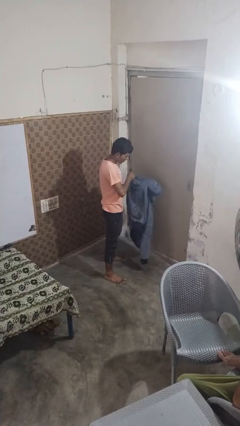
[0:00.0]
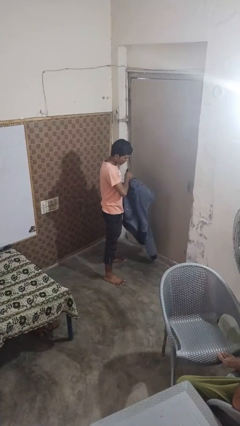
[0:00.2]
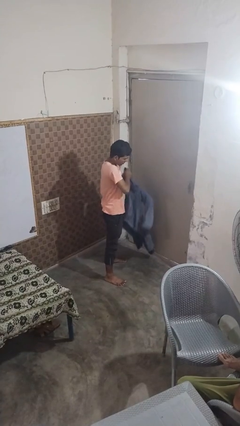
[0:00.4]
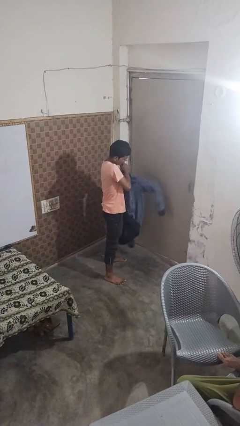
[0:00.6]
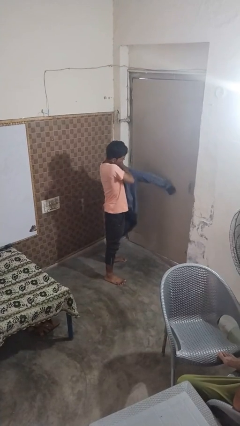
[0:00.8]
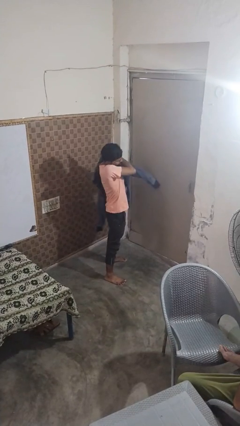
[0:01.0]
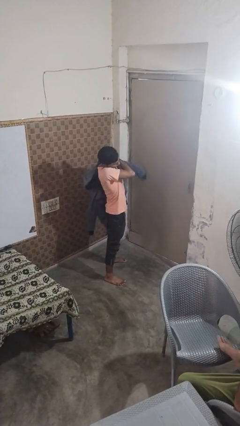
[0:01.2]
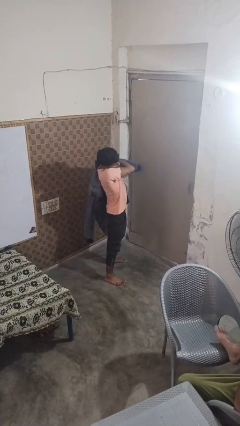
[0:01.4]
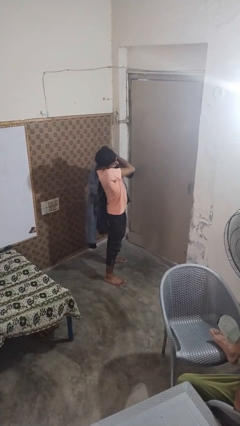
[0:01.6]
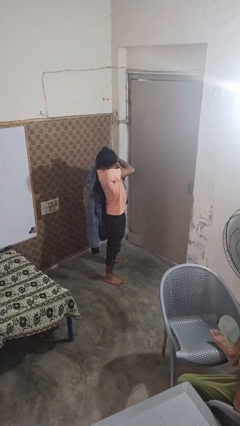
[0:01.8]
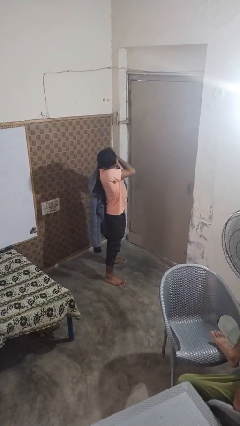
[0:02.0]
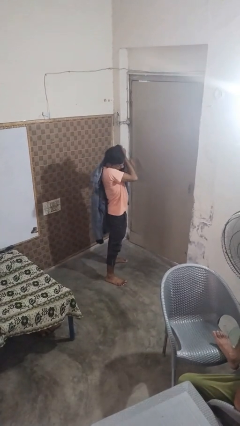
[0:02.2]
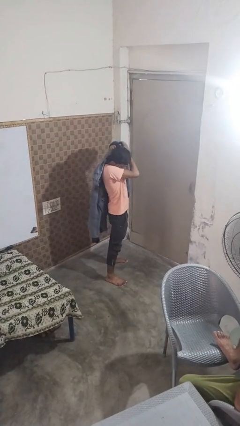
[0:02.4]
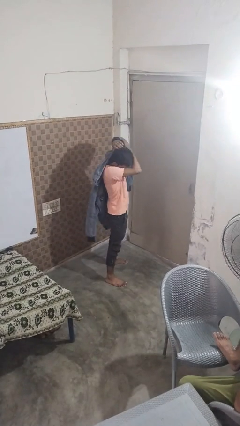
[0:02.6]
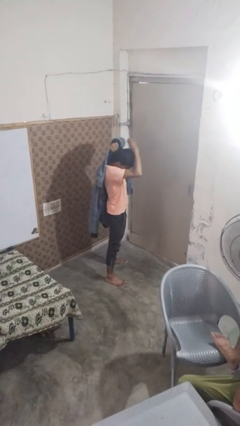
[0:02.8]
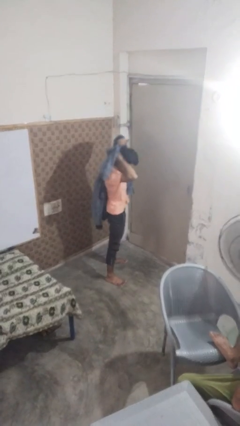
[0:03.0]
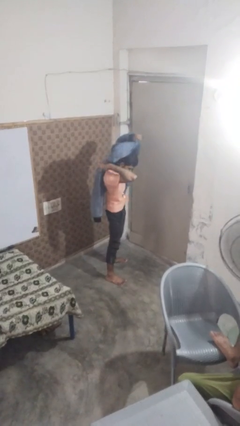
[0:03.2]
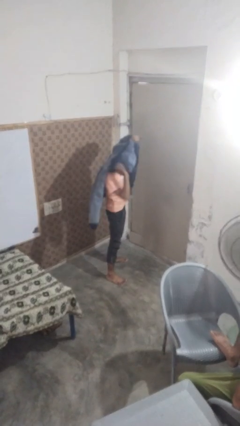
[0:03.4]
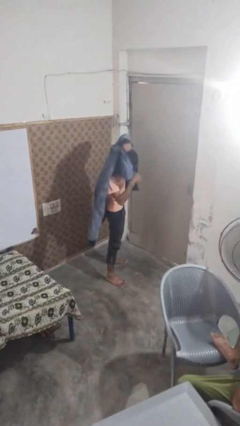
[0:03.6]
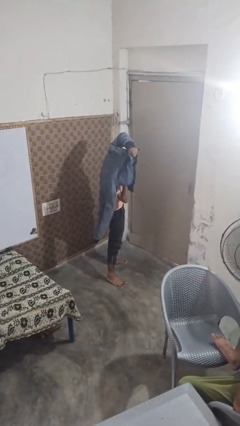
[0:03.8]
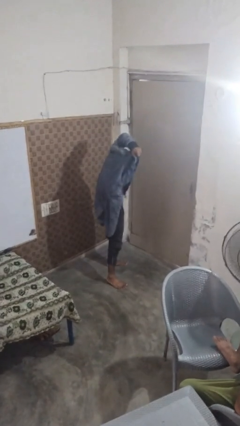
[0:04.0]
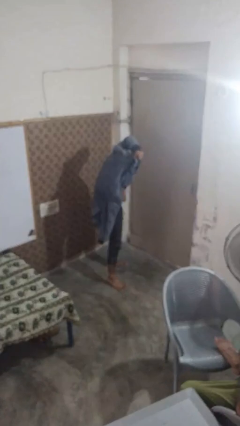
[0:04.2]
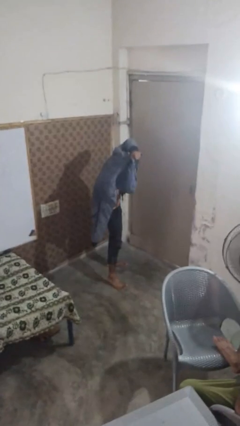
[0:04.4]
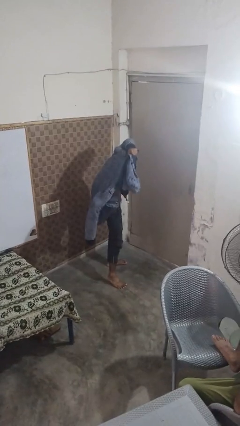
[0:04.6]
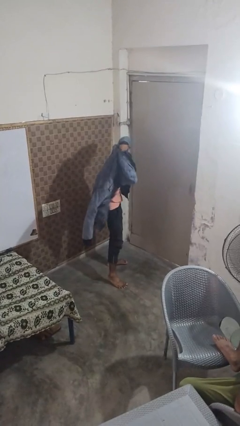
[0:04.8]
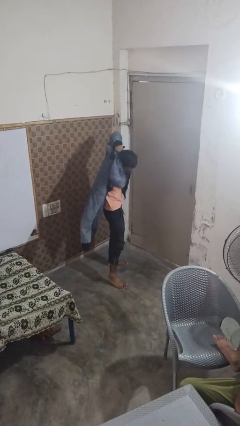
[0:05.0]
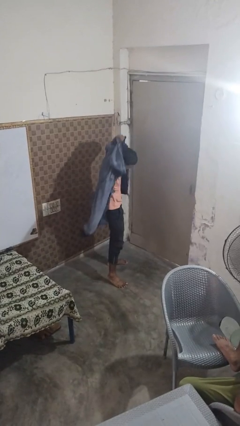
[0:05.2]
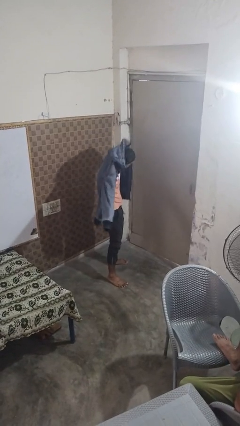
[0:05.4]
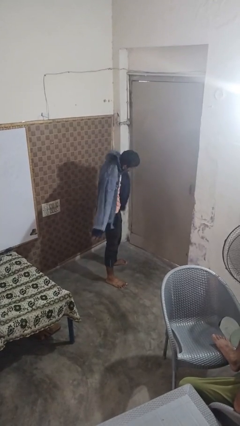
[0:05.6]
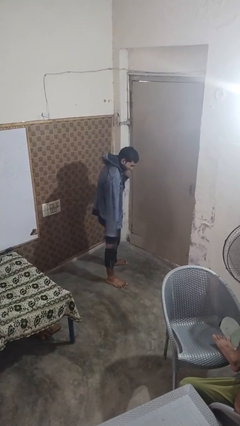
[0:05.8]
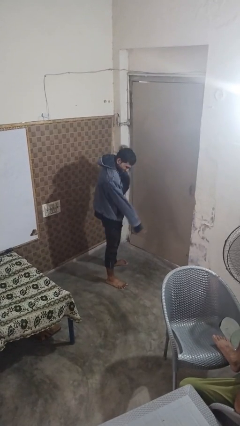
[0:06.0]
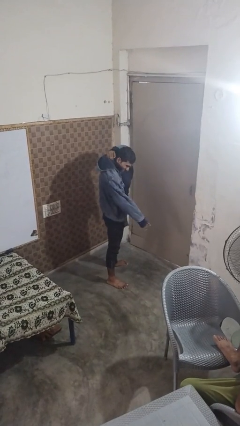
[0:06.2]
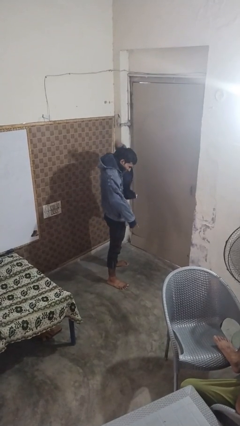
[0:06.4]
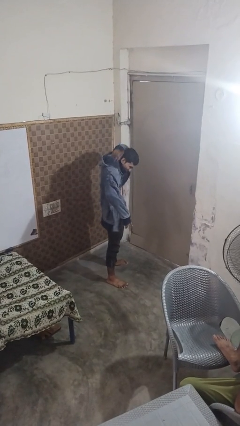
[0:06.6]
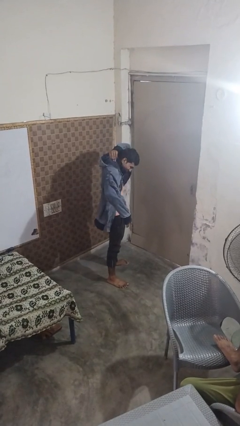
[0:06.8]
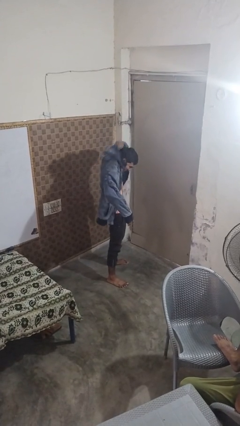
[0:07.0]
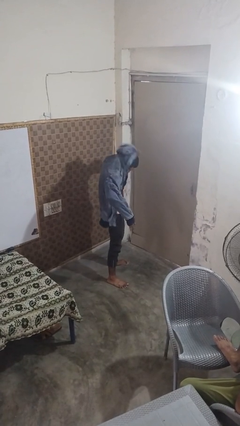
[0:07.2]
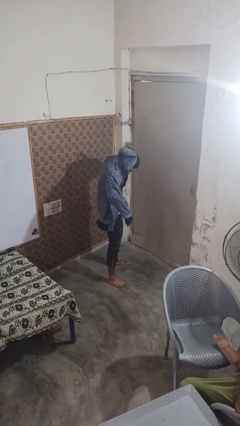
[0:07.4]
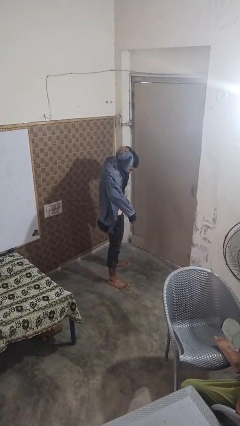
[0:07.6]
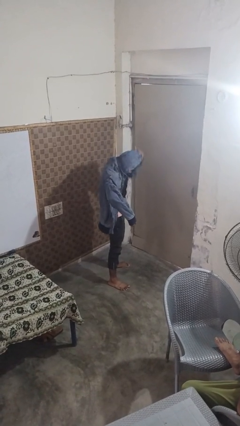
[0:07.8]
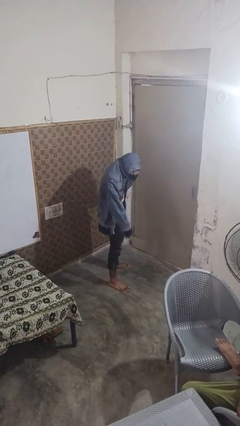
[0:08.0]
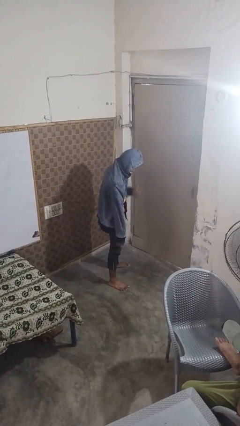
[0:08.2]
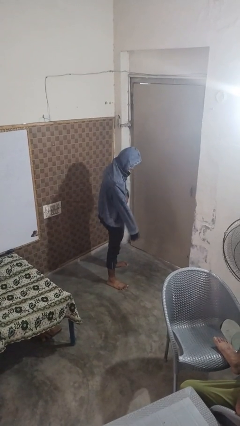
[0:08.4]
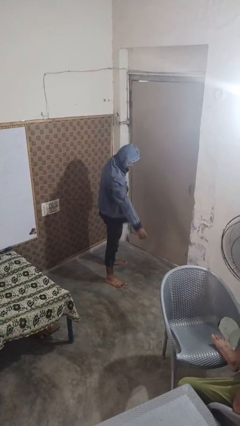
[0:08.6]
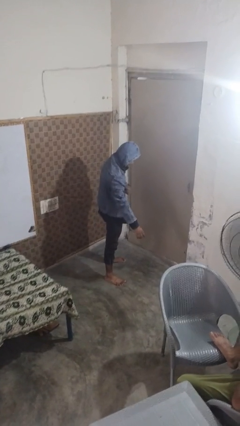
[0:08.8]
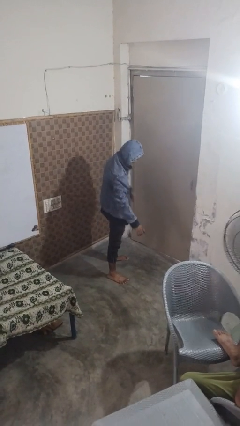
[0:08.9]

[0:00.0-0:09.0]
person puts on hoodie

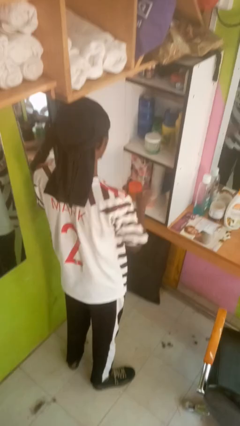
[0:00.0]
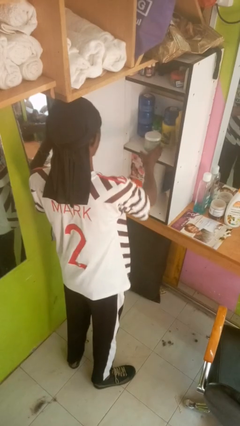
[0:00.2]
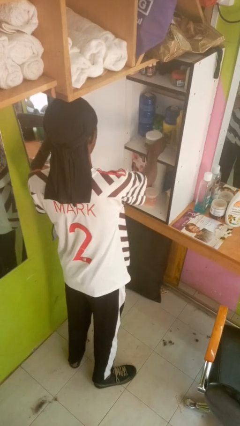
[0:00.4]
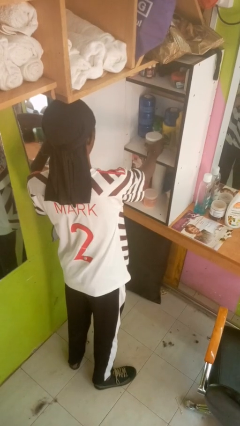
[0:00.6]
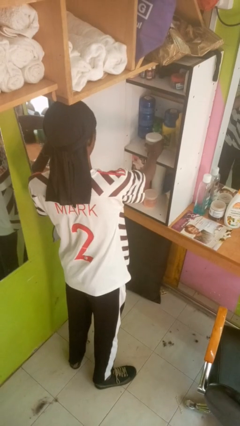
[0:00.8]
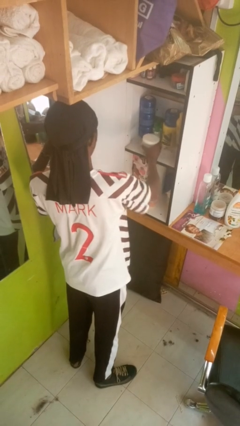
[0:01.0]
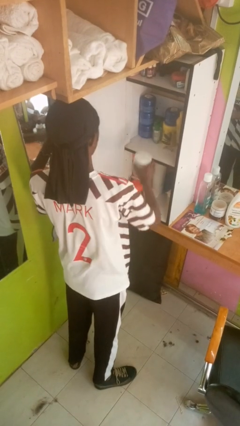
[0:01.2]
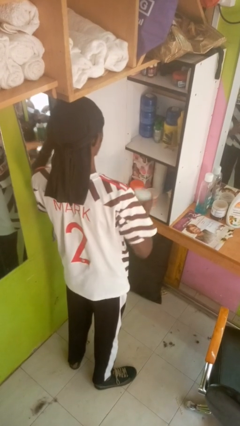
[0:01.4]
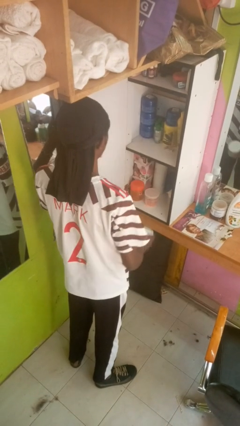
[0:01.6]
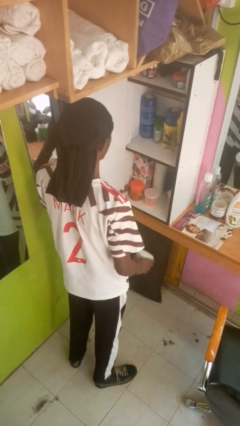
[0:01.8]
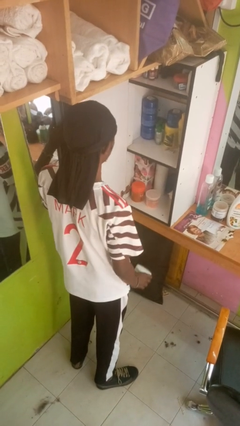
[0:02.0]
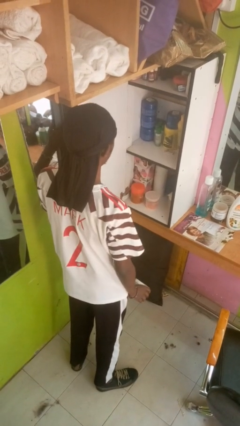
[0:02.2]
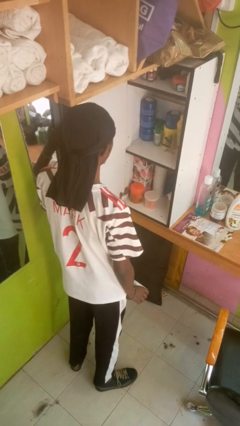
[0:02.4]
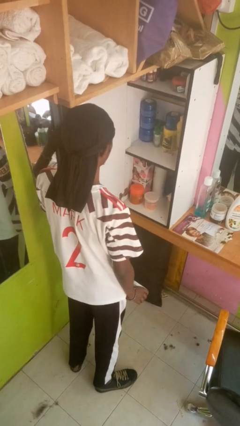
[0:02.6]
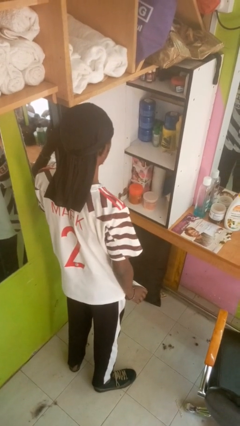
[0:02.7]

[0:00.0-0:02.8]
person picks up object from cabinet

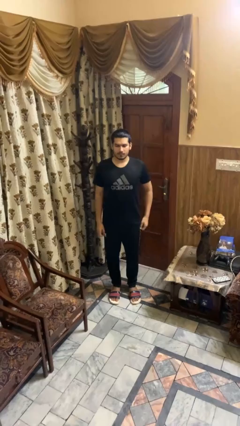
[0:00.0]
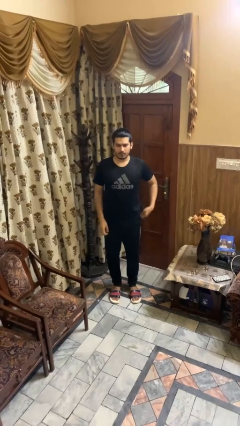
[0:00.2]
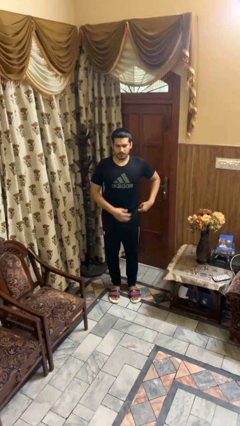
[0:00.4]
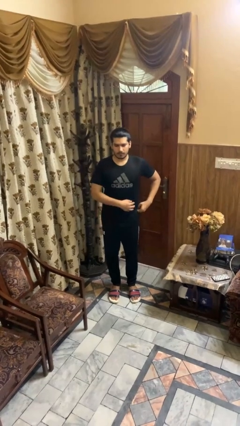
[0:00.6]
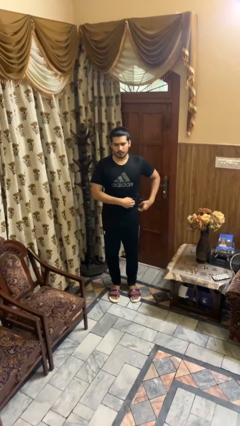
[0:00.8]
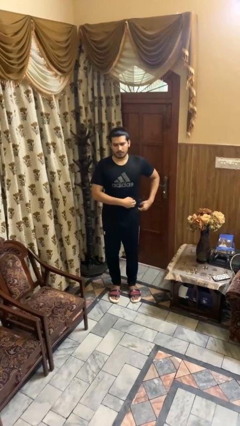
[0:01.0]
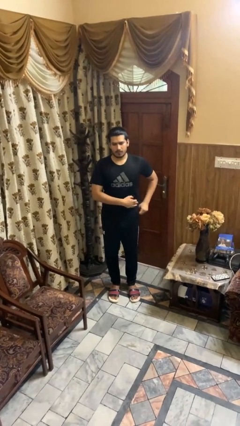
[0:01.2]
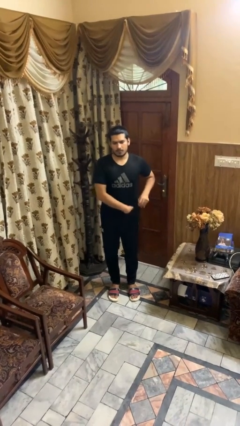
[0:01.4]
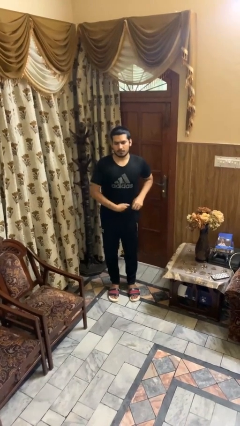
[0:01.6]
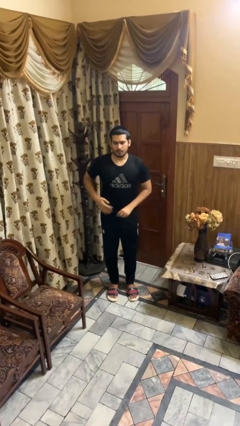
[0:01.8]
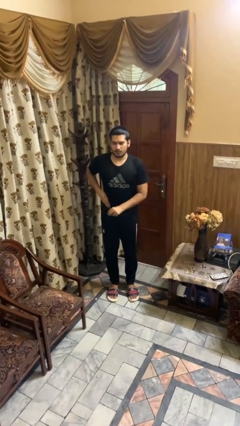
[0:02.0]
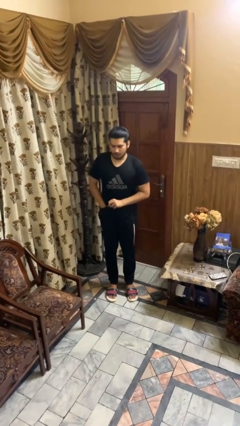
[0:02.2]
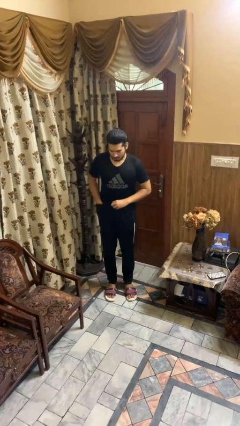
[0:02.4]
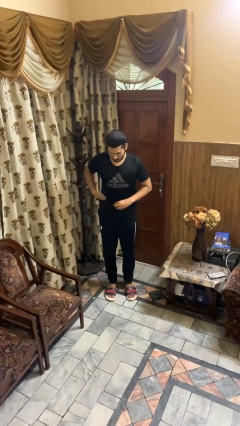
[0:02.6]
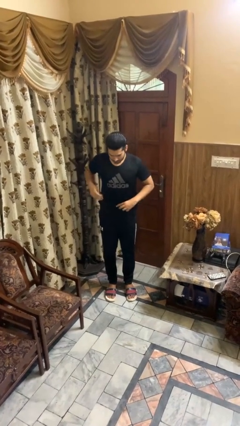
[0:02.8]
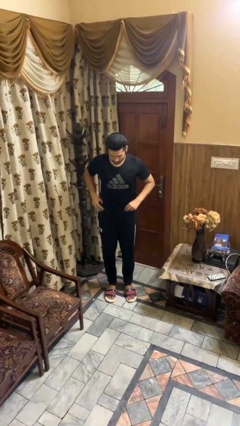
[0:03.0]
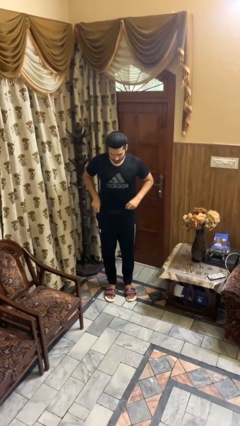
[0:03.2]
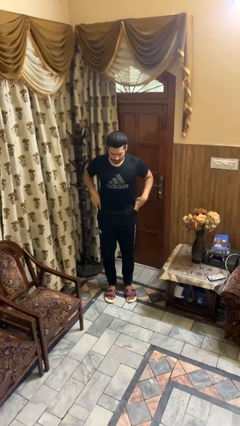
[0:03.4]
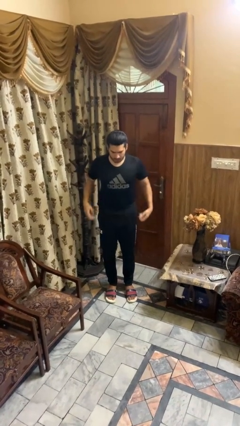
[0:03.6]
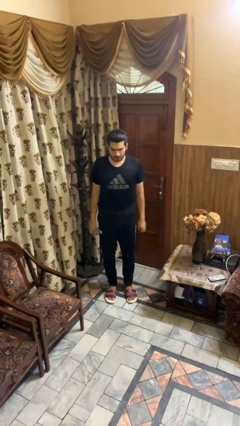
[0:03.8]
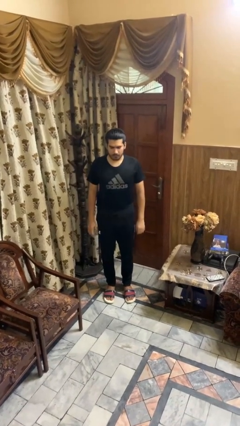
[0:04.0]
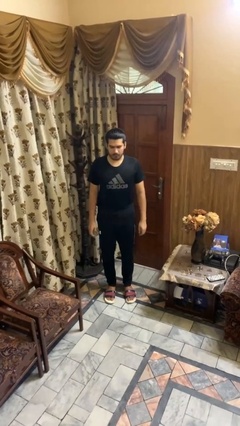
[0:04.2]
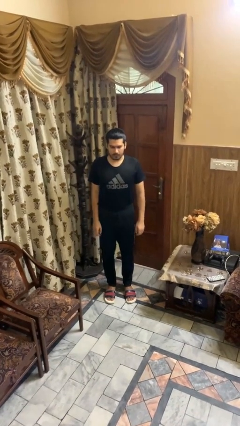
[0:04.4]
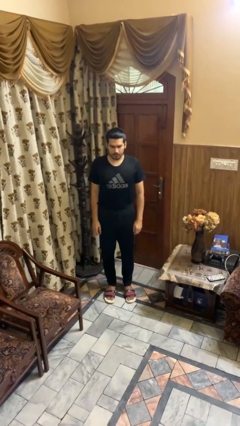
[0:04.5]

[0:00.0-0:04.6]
person tucks in shirt

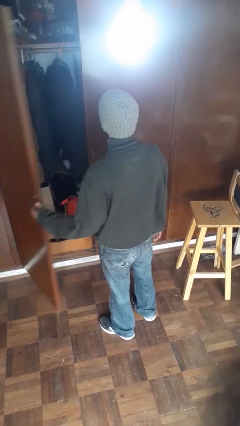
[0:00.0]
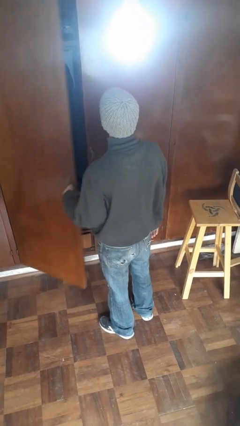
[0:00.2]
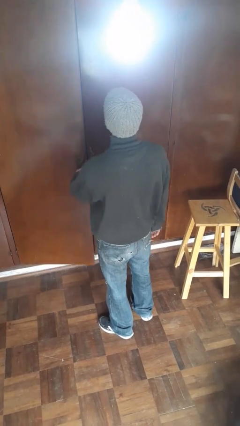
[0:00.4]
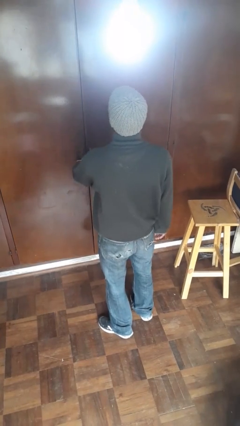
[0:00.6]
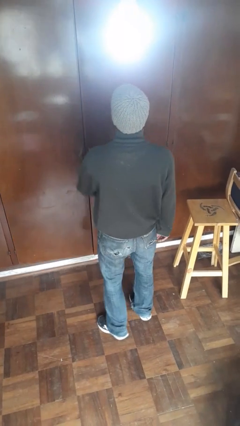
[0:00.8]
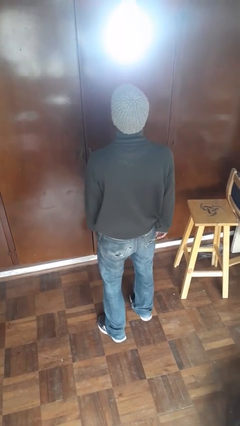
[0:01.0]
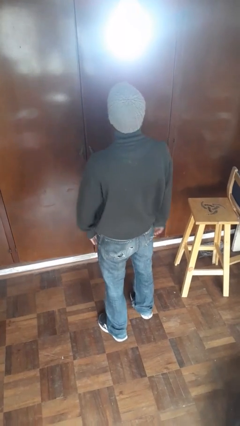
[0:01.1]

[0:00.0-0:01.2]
person closes closet door

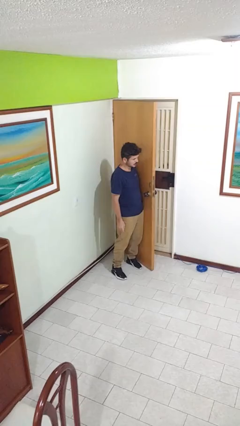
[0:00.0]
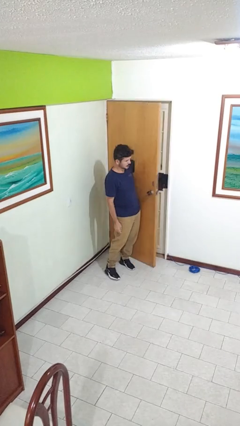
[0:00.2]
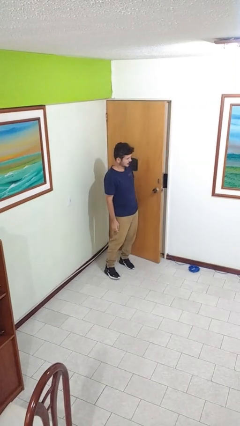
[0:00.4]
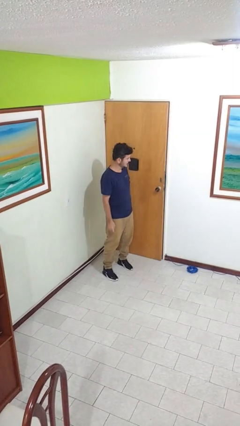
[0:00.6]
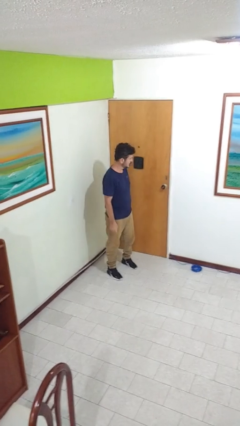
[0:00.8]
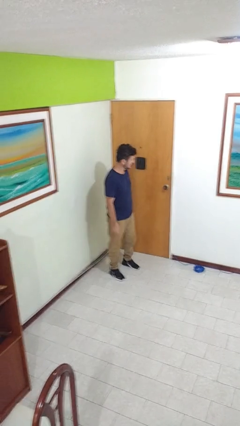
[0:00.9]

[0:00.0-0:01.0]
person closes door with hip
